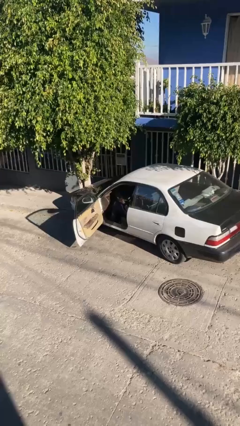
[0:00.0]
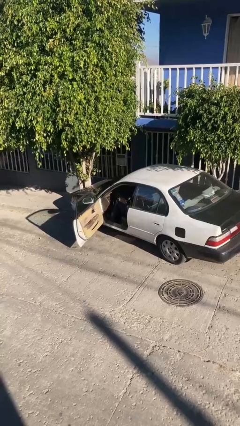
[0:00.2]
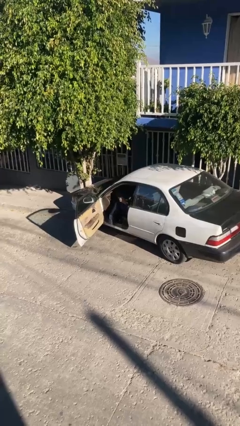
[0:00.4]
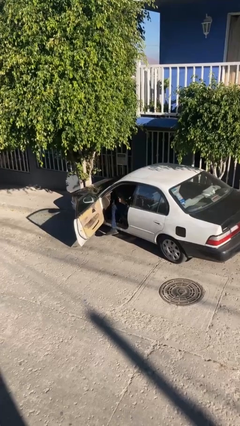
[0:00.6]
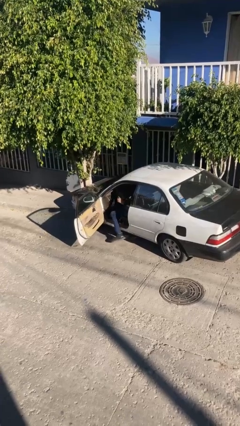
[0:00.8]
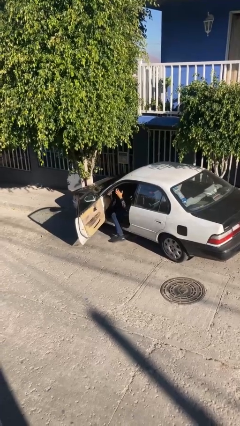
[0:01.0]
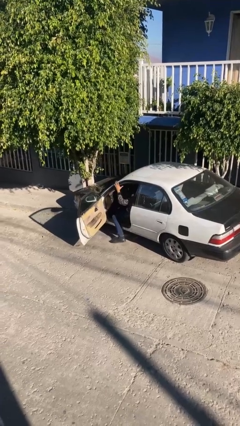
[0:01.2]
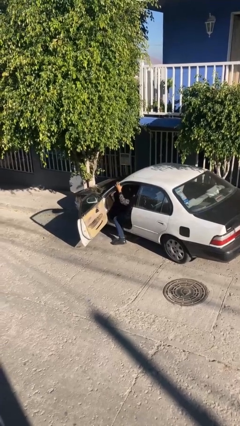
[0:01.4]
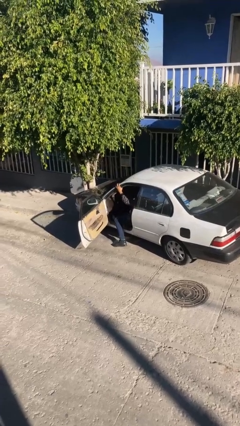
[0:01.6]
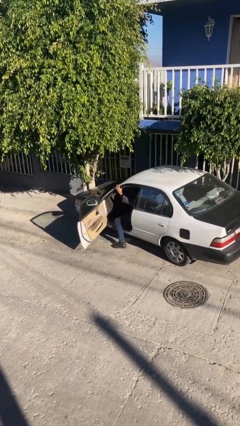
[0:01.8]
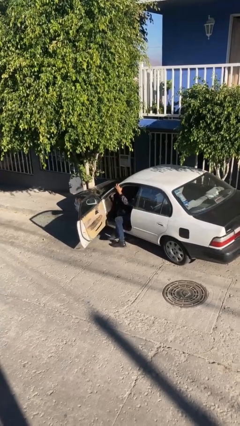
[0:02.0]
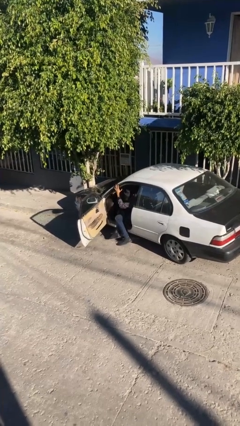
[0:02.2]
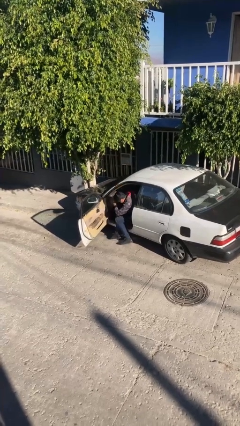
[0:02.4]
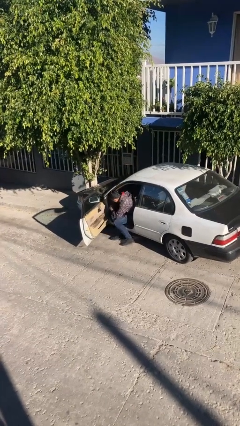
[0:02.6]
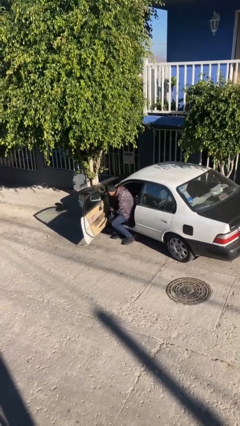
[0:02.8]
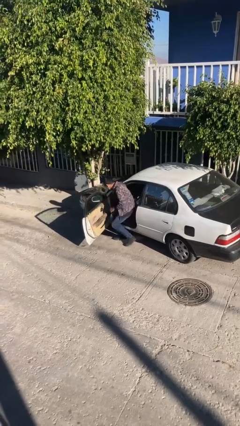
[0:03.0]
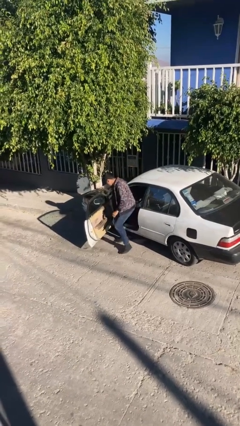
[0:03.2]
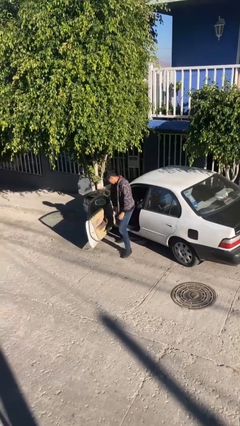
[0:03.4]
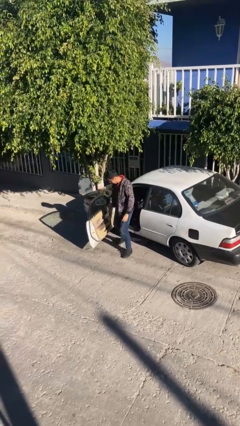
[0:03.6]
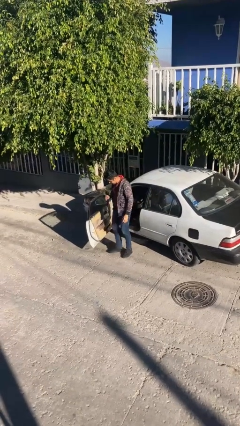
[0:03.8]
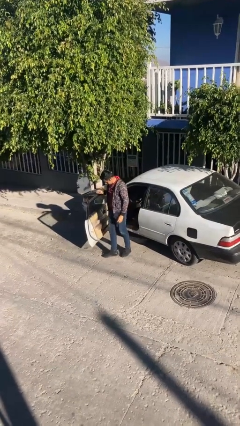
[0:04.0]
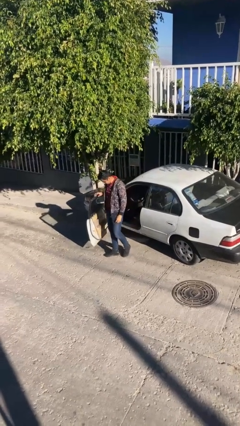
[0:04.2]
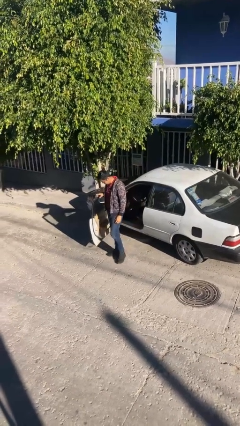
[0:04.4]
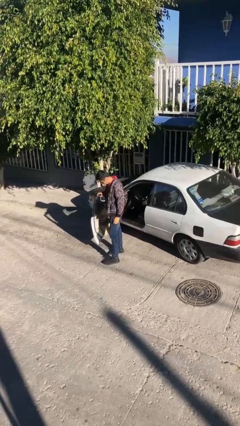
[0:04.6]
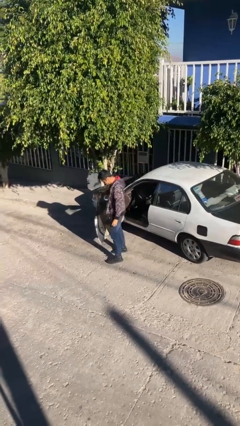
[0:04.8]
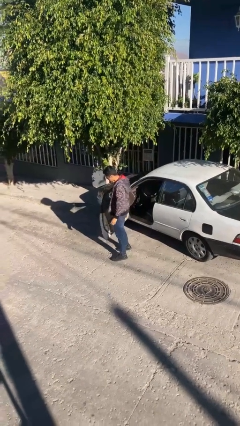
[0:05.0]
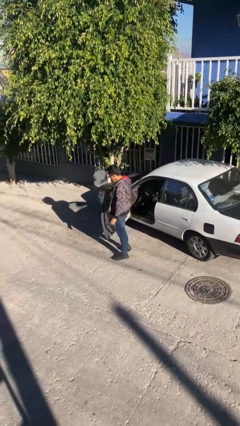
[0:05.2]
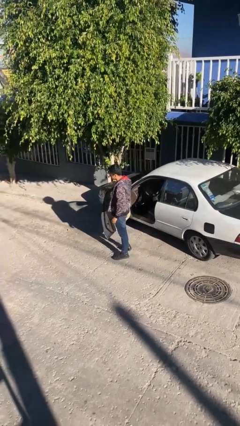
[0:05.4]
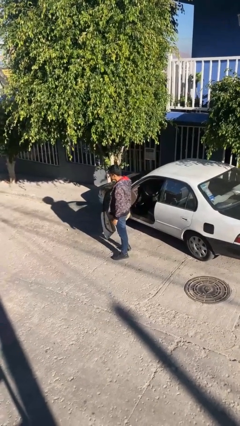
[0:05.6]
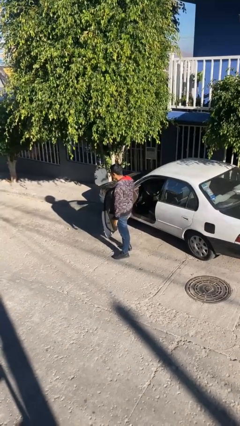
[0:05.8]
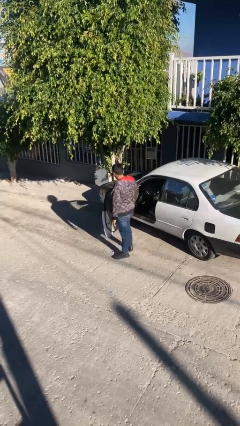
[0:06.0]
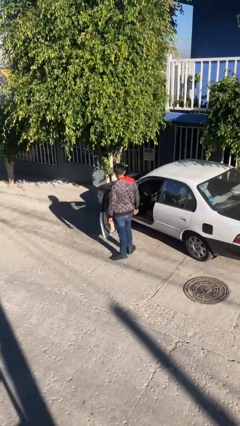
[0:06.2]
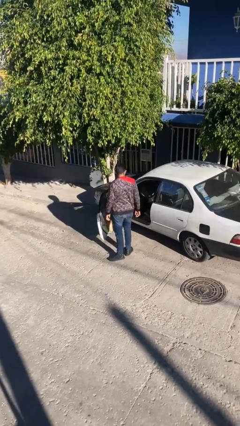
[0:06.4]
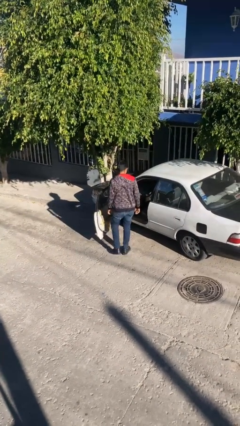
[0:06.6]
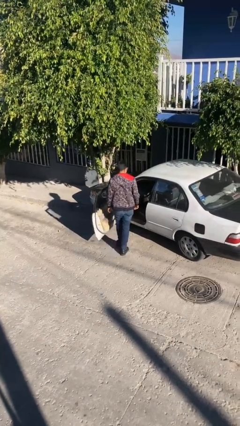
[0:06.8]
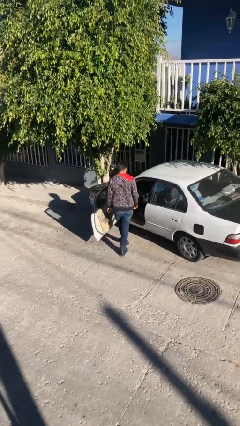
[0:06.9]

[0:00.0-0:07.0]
person exits car

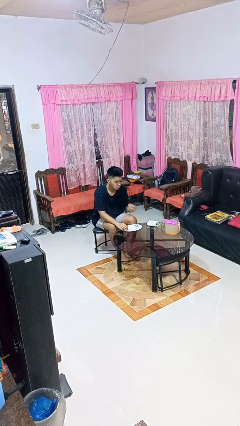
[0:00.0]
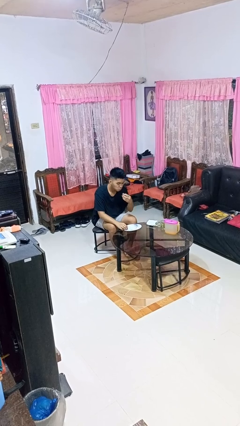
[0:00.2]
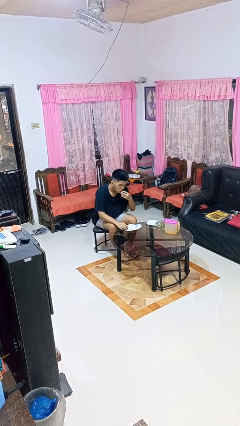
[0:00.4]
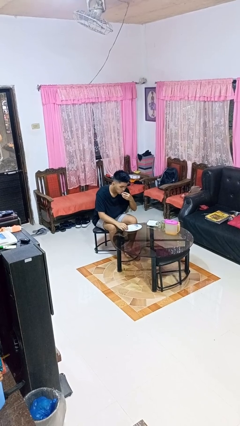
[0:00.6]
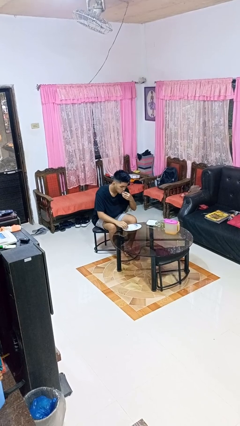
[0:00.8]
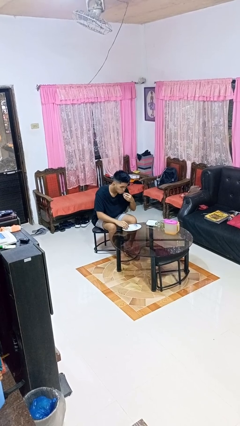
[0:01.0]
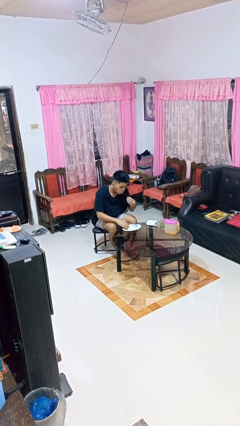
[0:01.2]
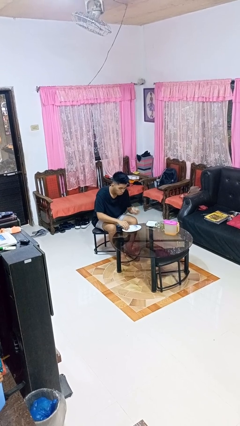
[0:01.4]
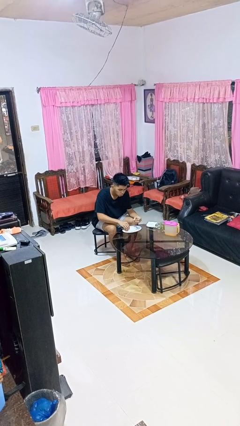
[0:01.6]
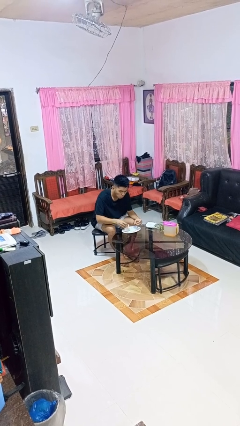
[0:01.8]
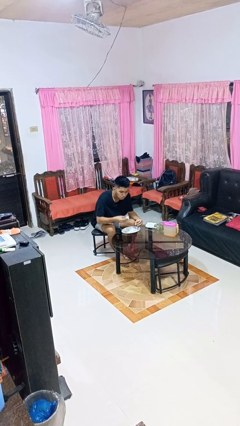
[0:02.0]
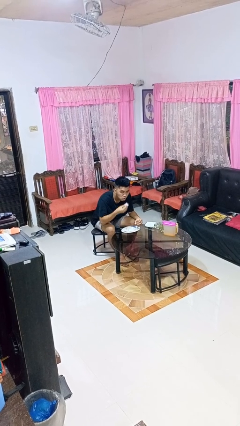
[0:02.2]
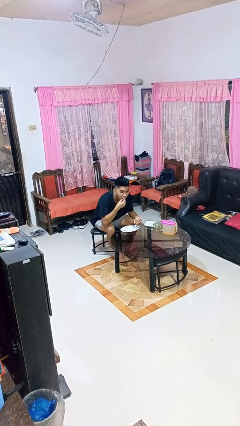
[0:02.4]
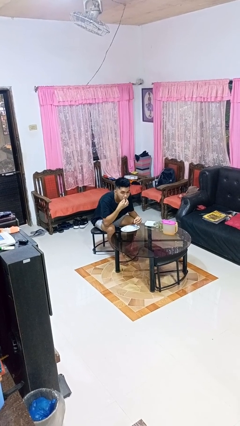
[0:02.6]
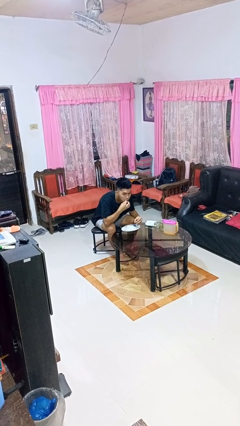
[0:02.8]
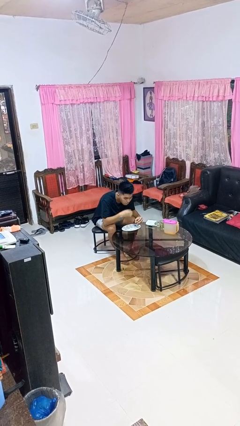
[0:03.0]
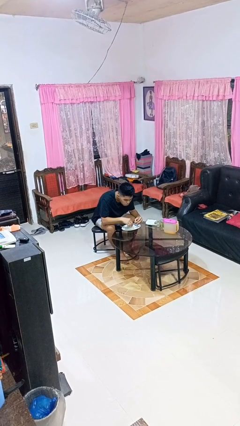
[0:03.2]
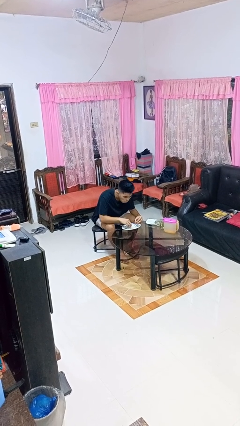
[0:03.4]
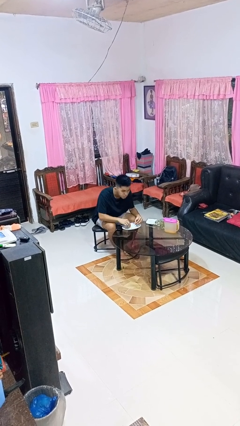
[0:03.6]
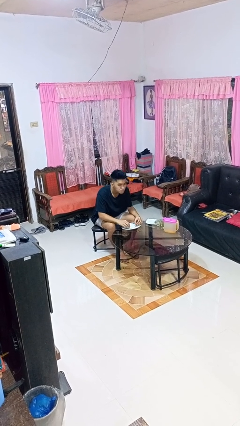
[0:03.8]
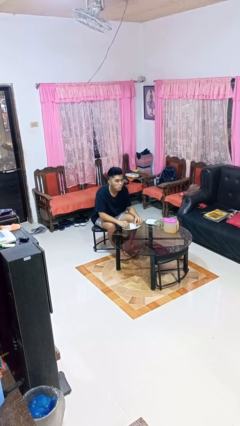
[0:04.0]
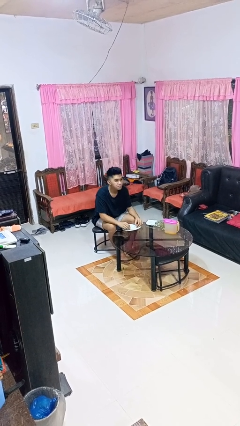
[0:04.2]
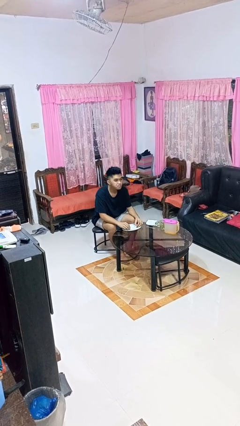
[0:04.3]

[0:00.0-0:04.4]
person eats with hands

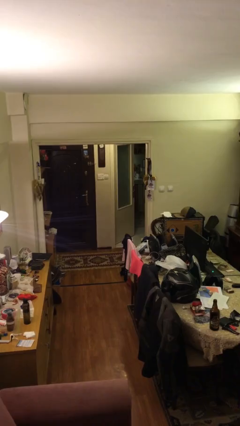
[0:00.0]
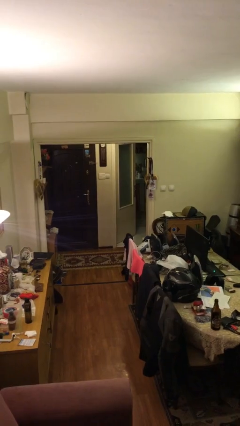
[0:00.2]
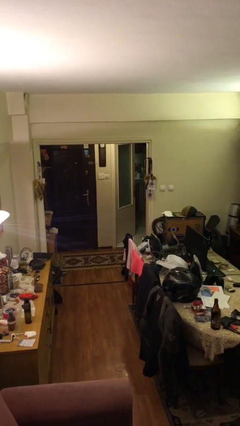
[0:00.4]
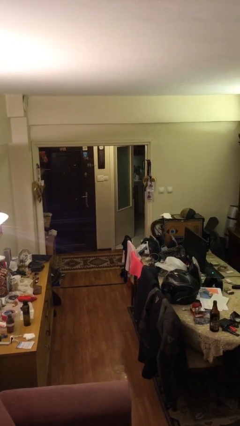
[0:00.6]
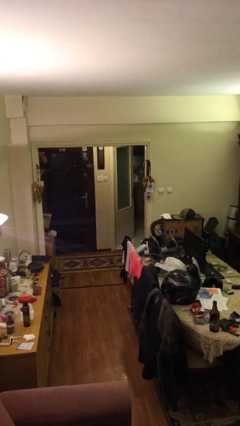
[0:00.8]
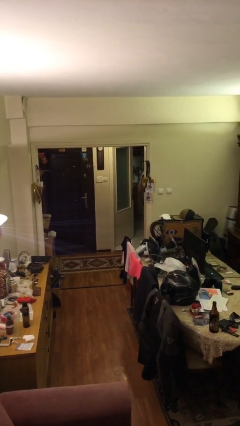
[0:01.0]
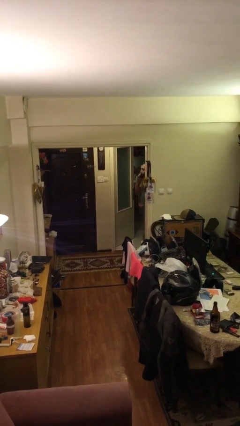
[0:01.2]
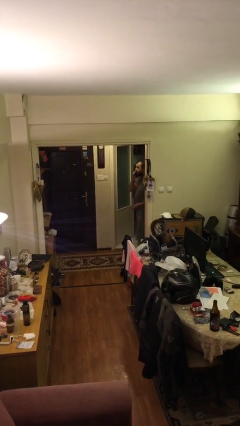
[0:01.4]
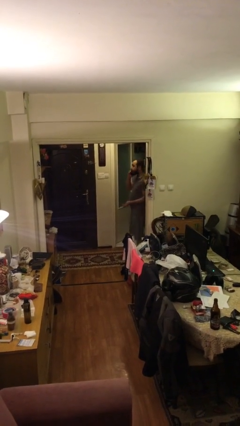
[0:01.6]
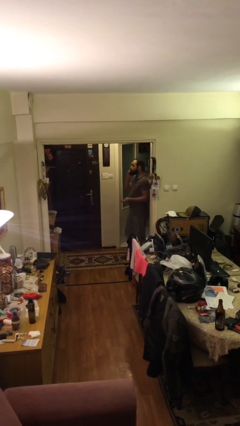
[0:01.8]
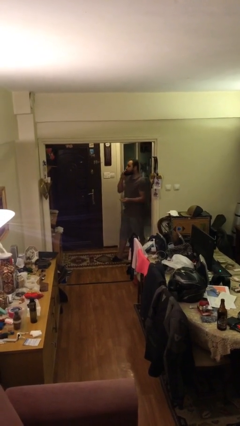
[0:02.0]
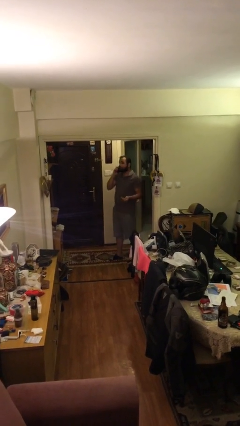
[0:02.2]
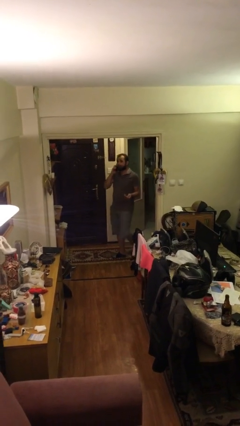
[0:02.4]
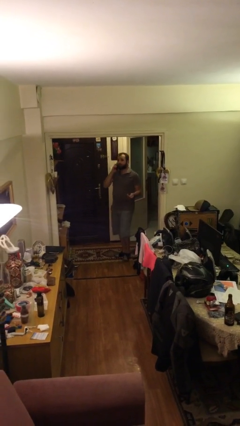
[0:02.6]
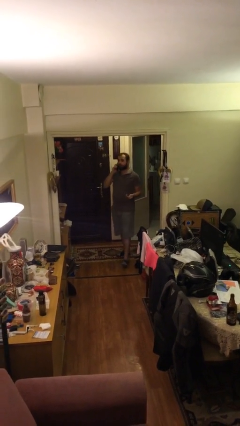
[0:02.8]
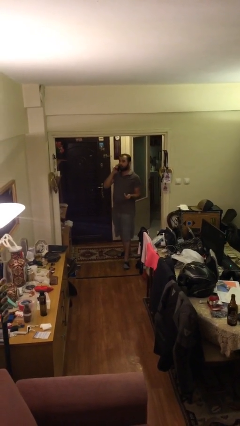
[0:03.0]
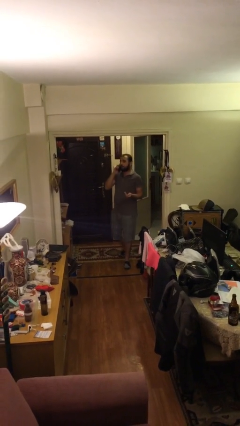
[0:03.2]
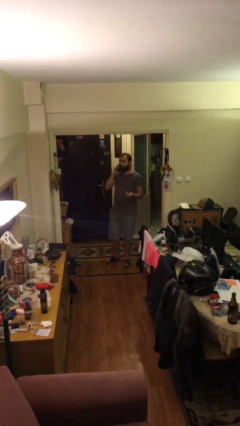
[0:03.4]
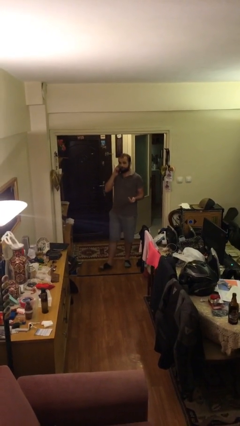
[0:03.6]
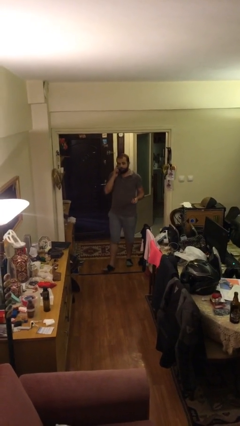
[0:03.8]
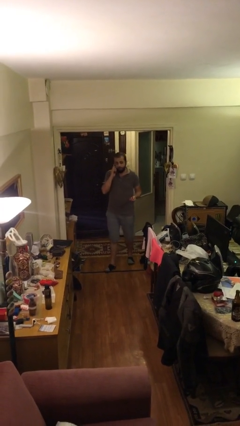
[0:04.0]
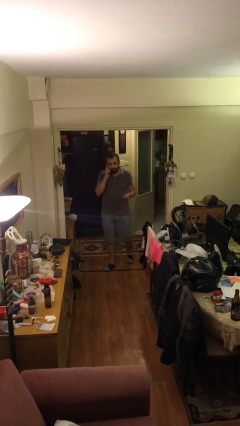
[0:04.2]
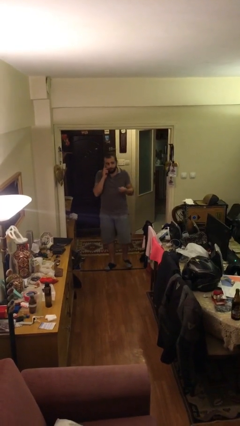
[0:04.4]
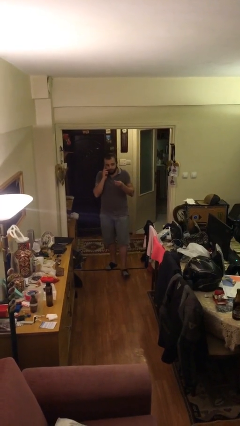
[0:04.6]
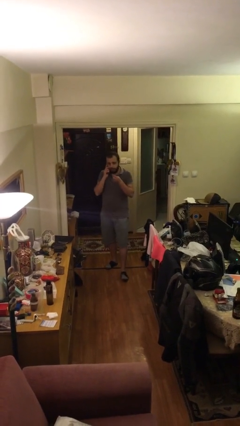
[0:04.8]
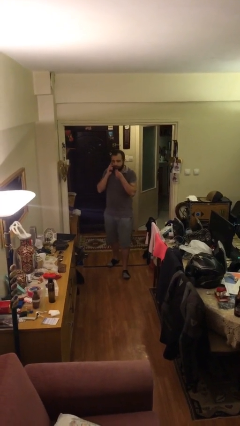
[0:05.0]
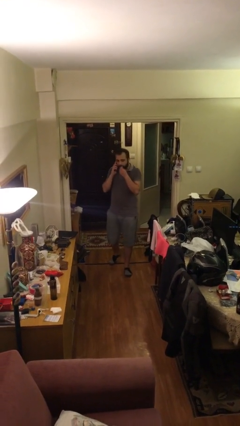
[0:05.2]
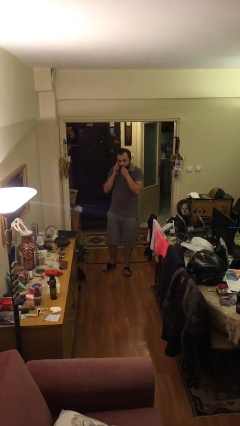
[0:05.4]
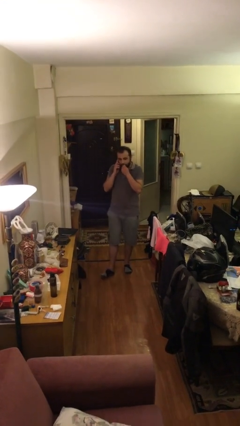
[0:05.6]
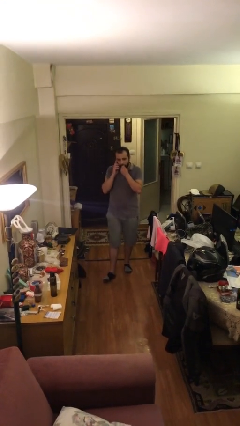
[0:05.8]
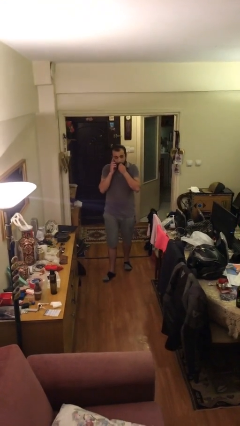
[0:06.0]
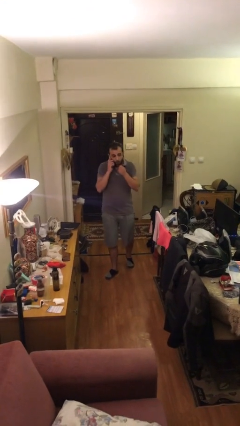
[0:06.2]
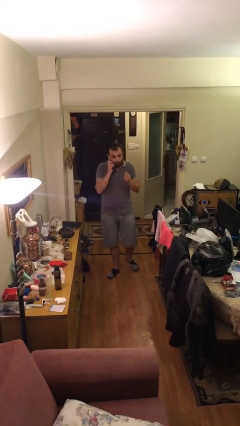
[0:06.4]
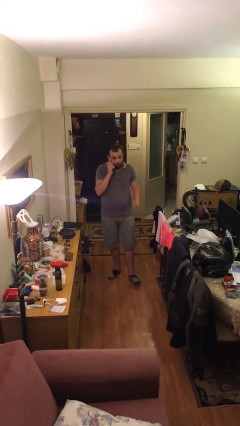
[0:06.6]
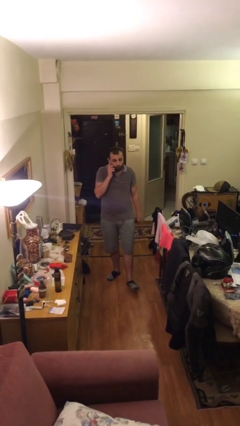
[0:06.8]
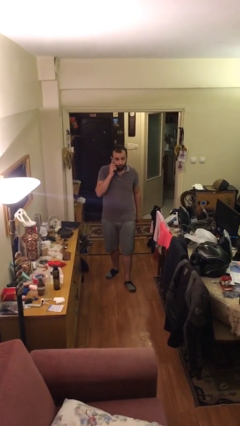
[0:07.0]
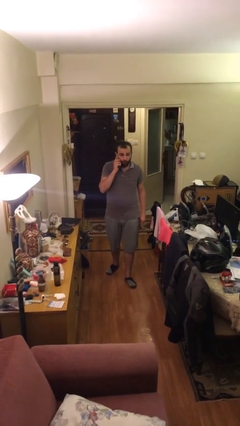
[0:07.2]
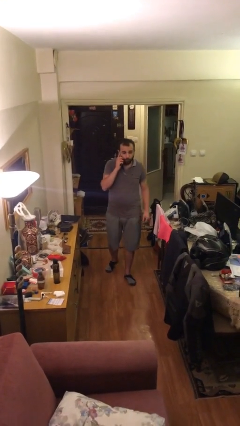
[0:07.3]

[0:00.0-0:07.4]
person enters scene through structure
